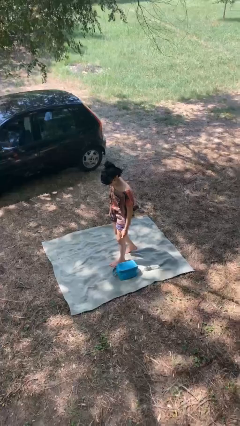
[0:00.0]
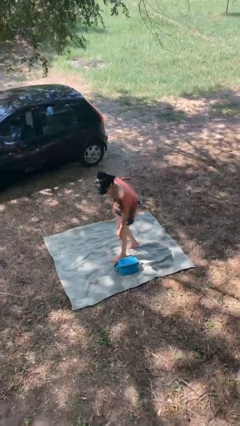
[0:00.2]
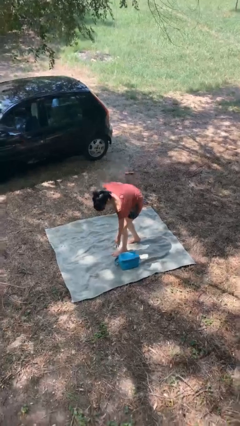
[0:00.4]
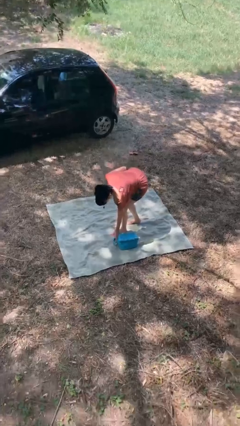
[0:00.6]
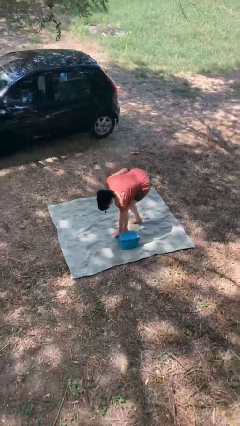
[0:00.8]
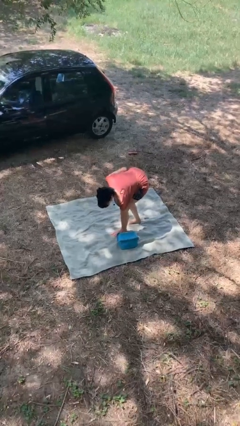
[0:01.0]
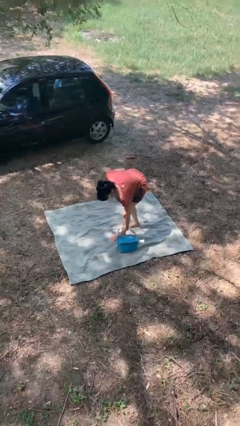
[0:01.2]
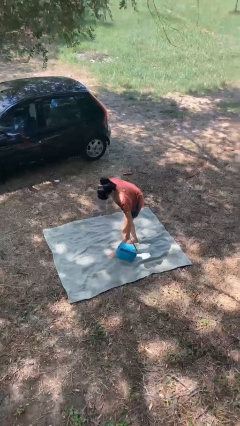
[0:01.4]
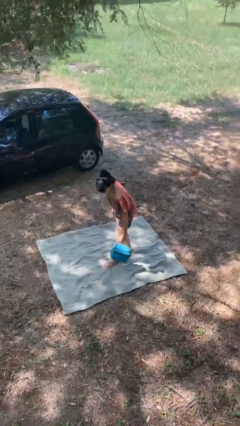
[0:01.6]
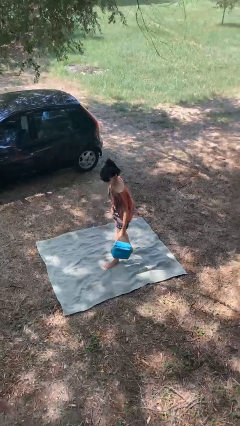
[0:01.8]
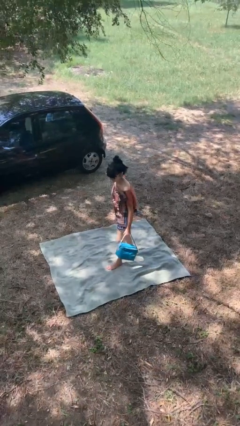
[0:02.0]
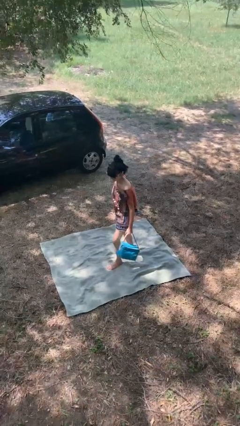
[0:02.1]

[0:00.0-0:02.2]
person picks up object from floor

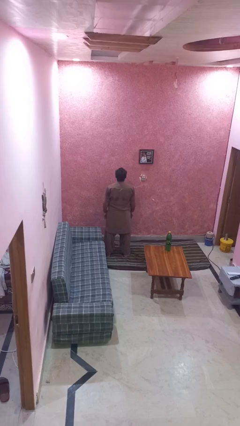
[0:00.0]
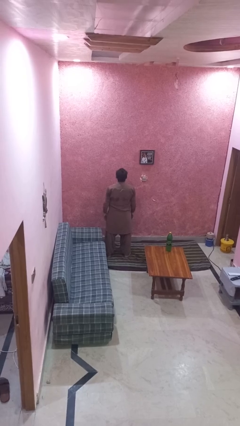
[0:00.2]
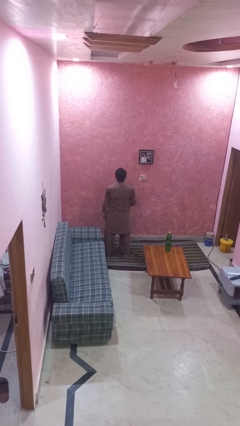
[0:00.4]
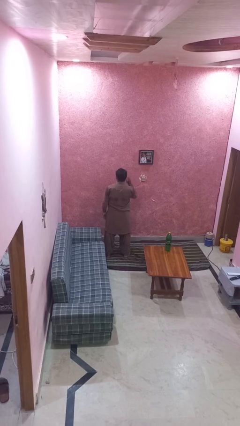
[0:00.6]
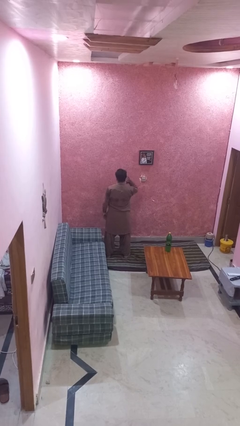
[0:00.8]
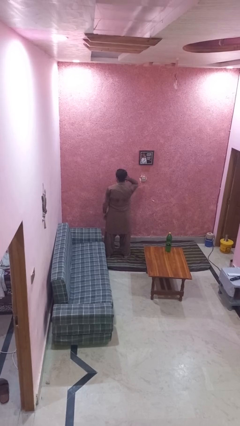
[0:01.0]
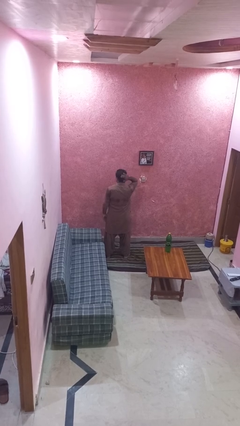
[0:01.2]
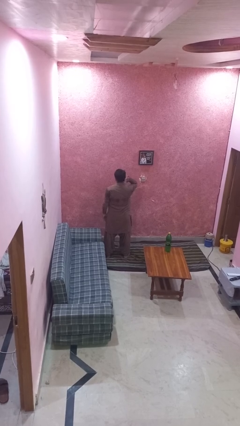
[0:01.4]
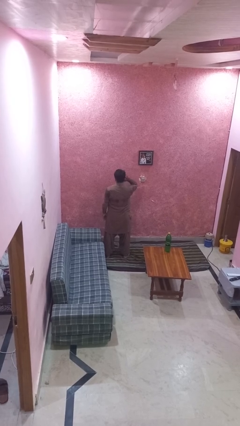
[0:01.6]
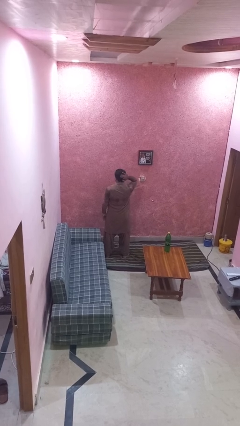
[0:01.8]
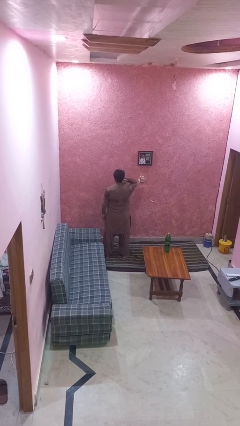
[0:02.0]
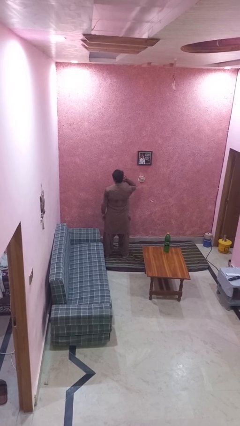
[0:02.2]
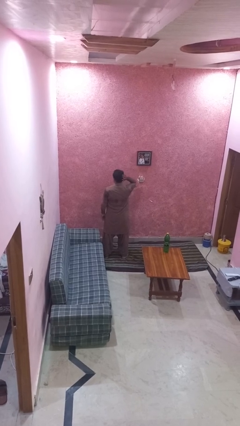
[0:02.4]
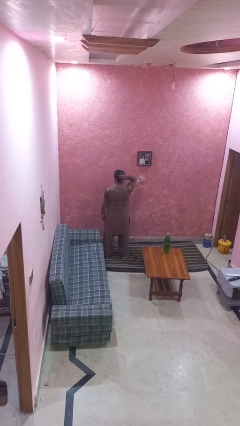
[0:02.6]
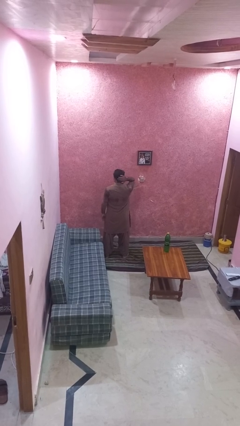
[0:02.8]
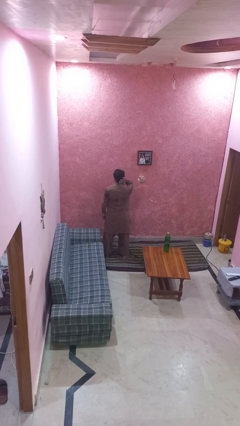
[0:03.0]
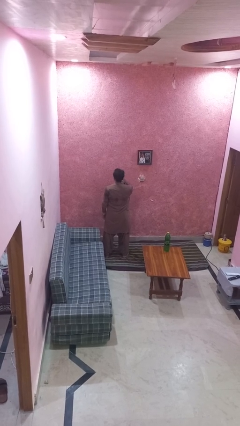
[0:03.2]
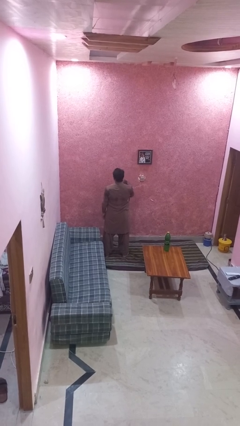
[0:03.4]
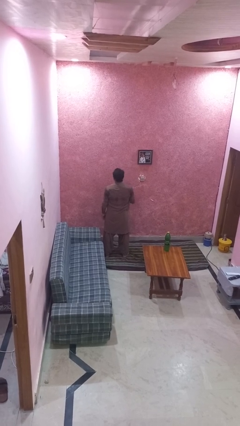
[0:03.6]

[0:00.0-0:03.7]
person strokes hair

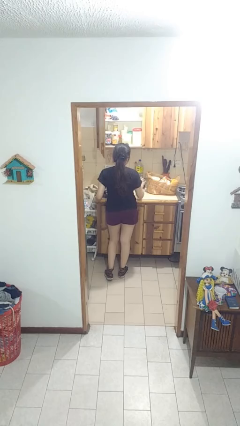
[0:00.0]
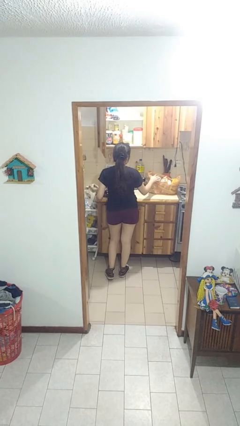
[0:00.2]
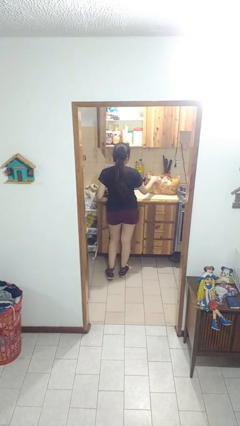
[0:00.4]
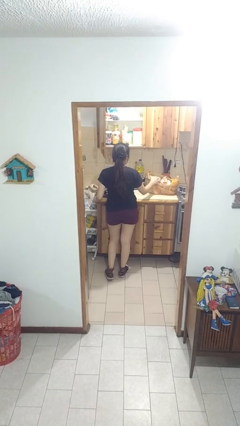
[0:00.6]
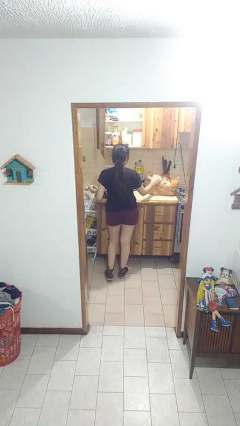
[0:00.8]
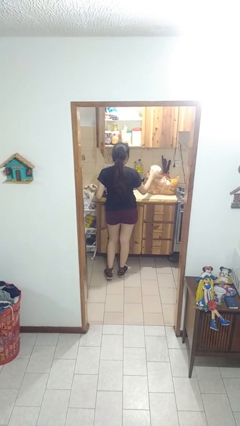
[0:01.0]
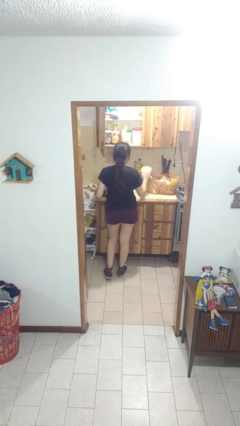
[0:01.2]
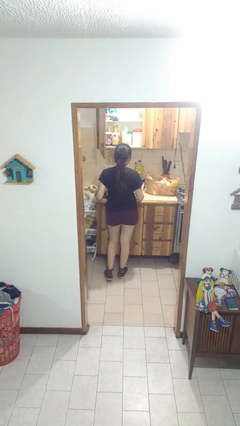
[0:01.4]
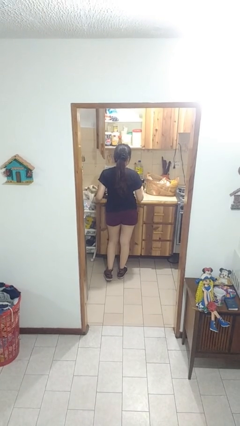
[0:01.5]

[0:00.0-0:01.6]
person takes object from bag

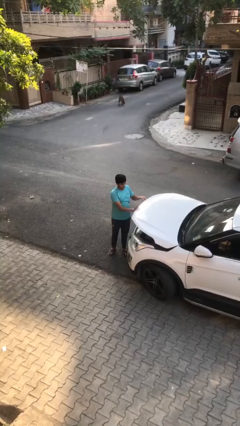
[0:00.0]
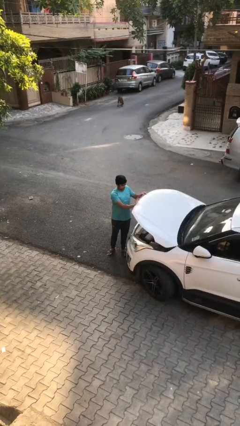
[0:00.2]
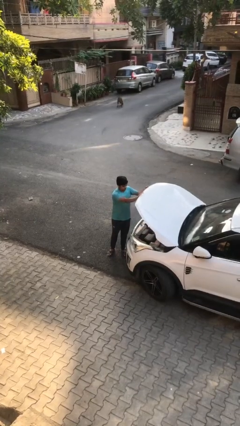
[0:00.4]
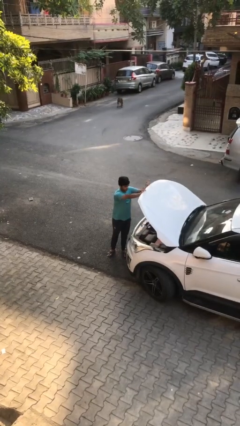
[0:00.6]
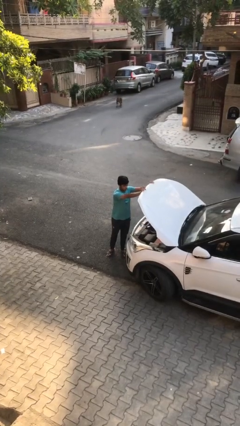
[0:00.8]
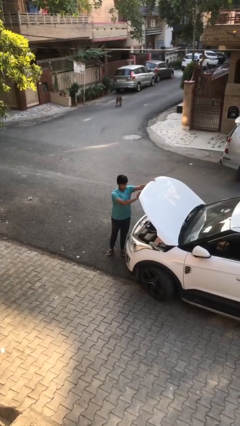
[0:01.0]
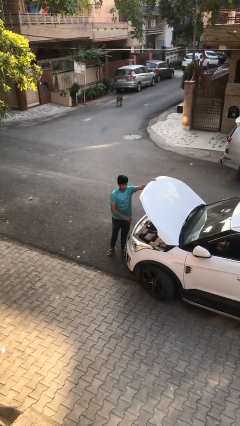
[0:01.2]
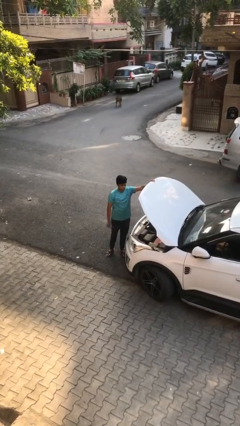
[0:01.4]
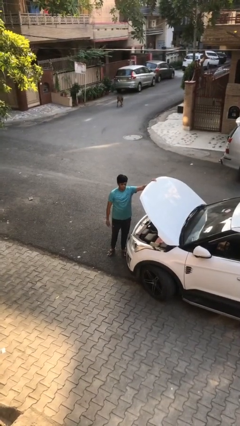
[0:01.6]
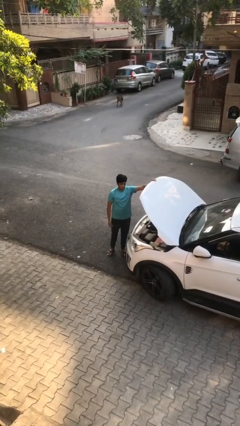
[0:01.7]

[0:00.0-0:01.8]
person opens car hood

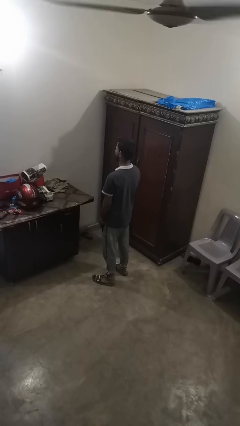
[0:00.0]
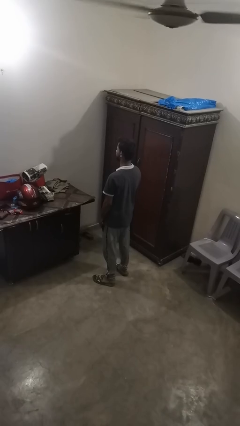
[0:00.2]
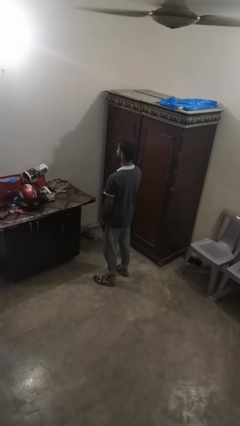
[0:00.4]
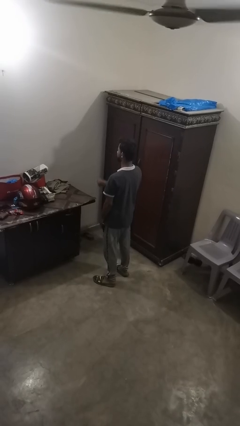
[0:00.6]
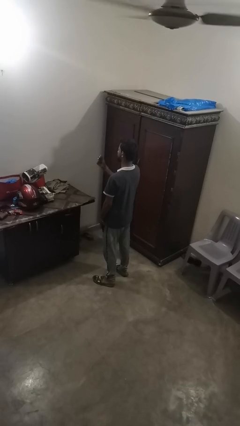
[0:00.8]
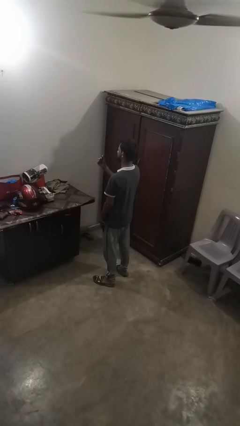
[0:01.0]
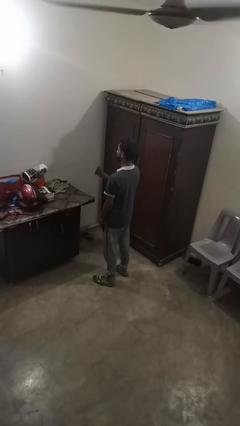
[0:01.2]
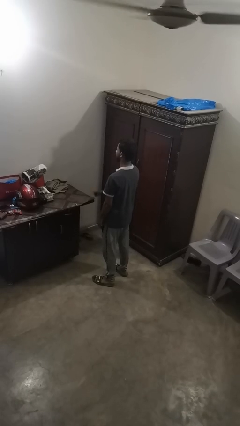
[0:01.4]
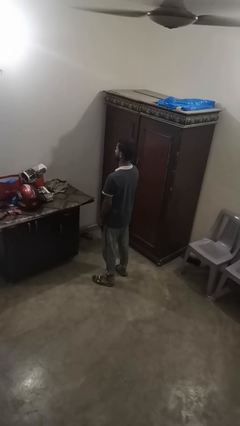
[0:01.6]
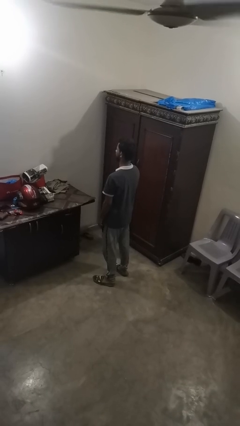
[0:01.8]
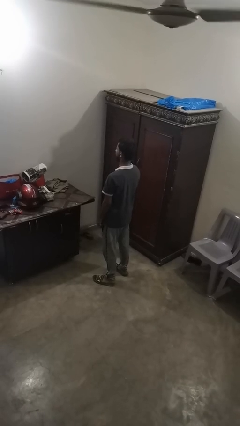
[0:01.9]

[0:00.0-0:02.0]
person snaps fingers

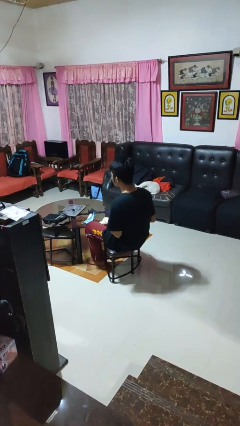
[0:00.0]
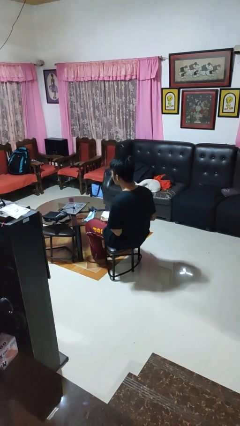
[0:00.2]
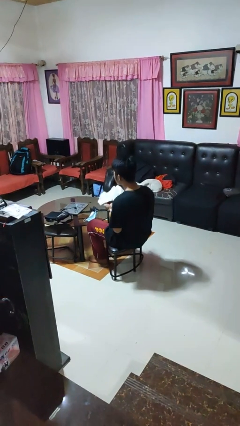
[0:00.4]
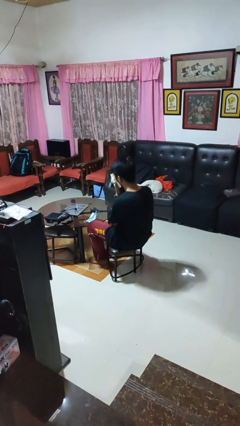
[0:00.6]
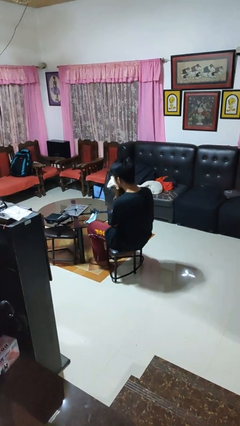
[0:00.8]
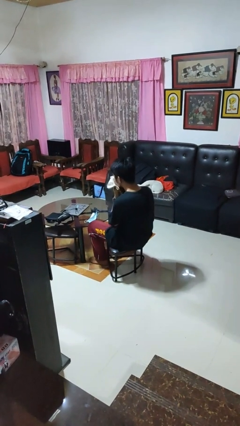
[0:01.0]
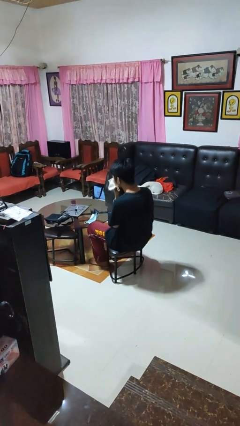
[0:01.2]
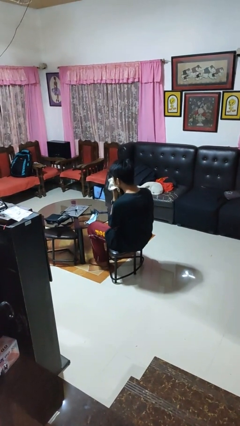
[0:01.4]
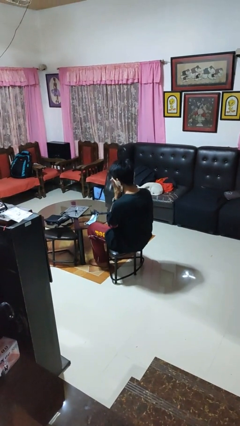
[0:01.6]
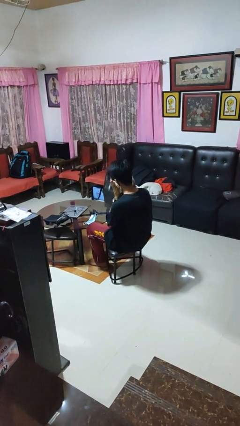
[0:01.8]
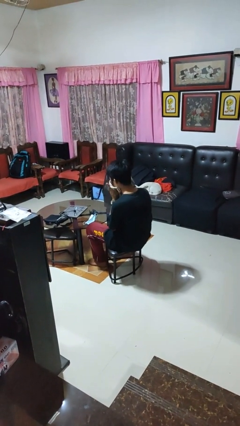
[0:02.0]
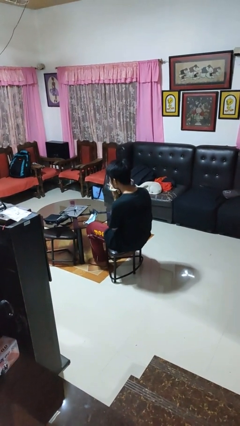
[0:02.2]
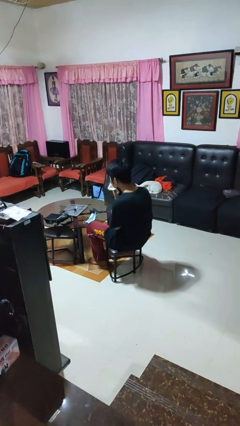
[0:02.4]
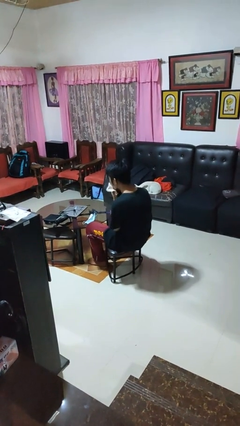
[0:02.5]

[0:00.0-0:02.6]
person wipes mouth with napkin

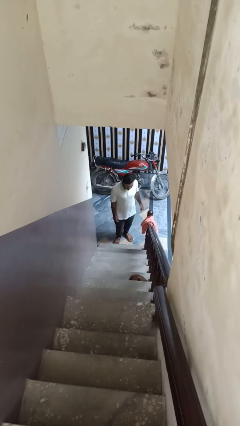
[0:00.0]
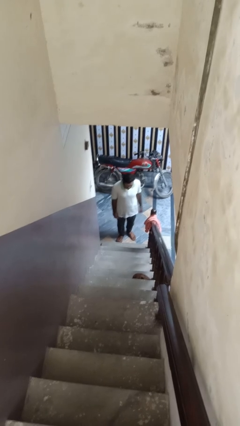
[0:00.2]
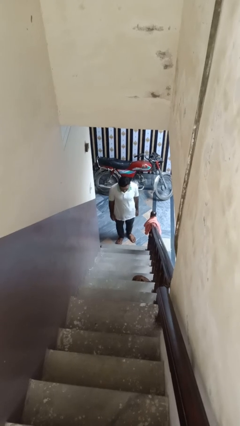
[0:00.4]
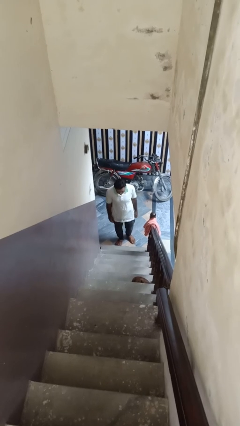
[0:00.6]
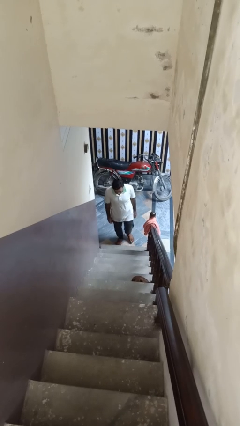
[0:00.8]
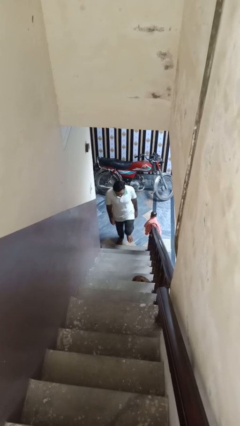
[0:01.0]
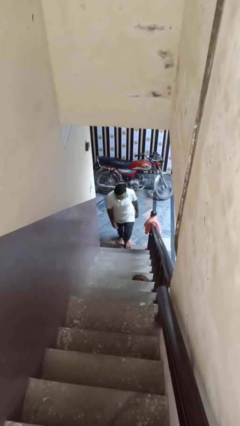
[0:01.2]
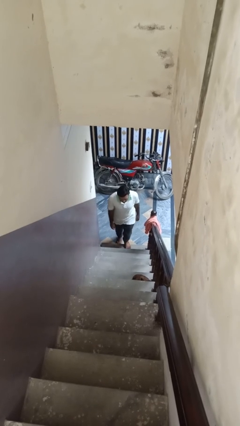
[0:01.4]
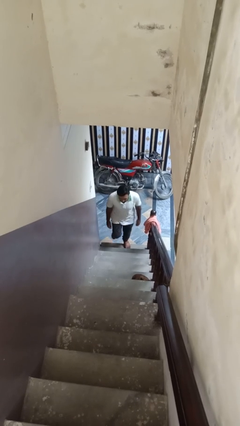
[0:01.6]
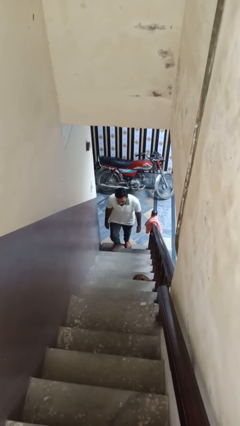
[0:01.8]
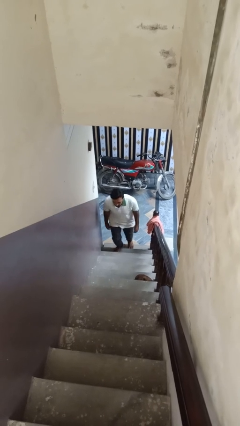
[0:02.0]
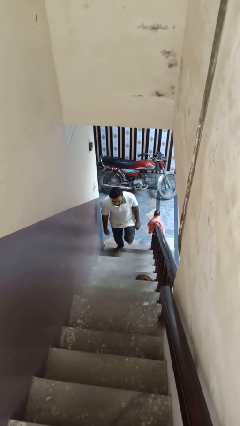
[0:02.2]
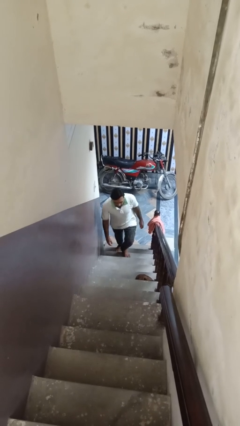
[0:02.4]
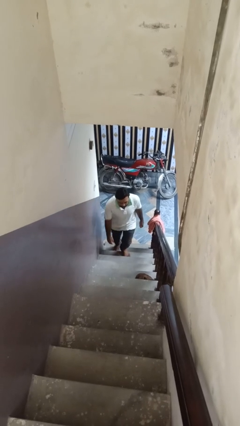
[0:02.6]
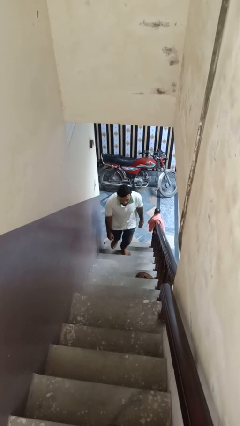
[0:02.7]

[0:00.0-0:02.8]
person climbs up ladder
